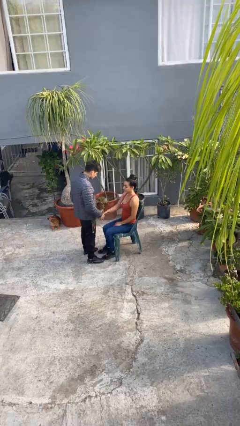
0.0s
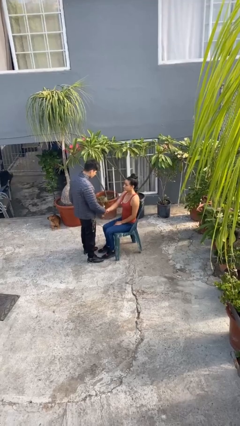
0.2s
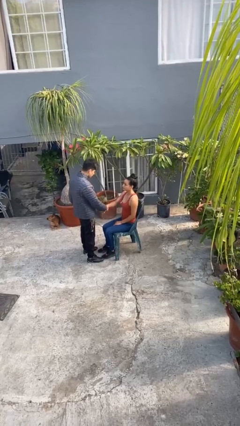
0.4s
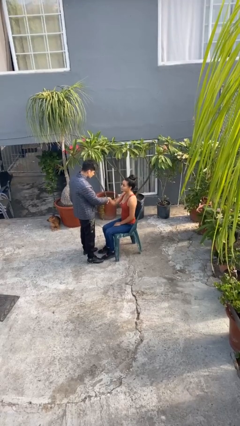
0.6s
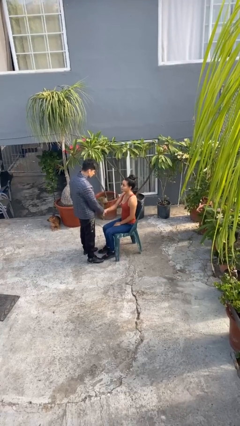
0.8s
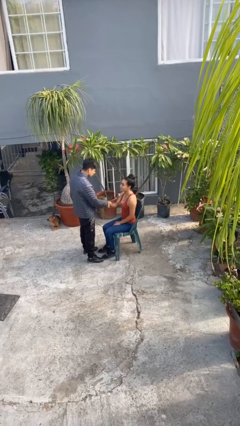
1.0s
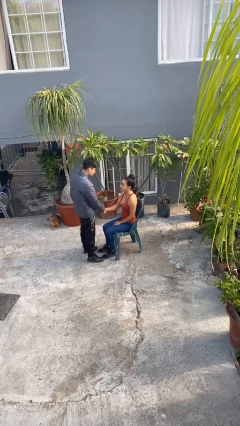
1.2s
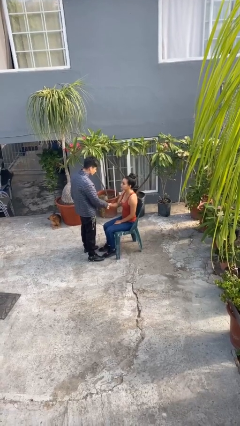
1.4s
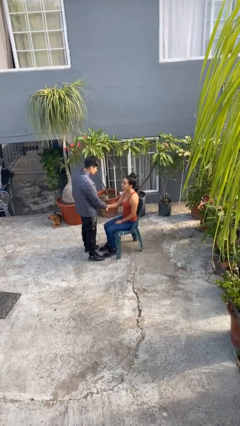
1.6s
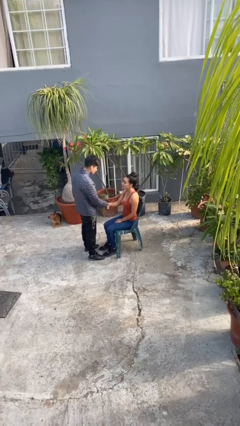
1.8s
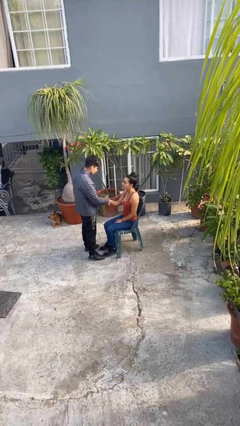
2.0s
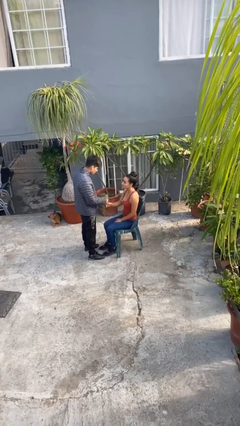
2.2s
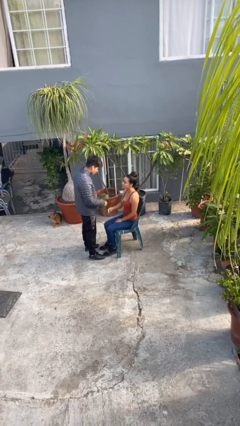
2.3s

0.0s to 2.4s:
person shakes hand

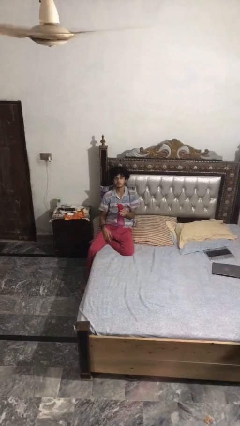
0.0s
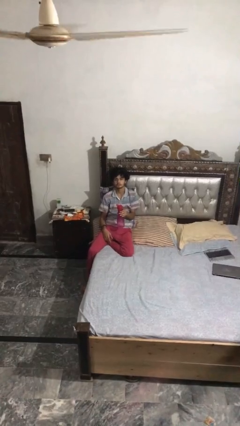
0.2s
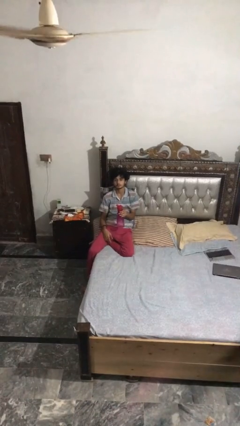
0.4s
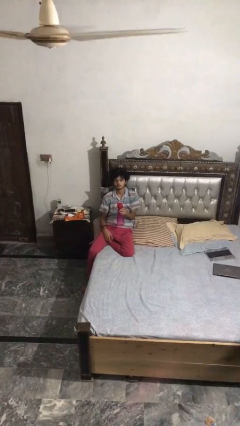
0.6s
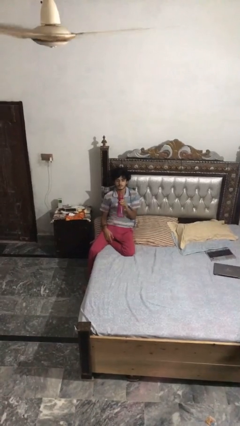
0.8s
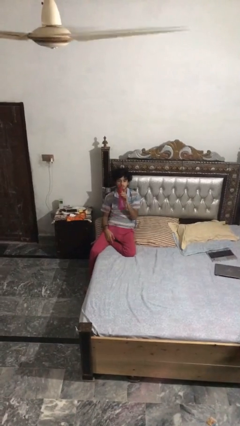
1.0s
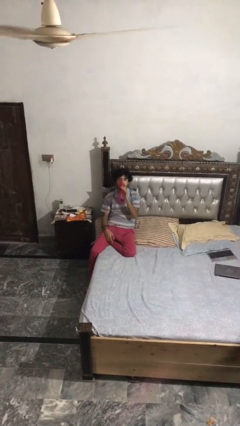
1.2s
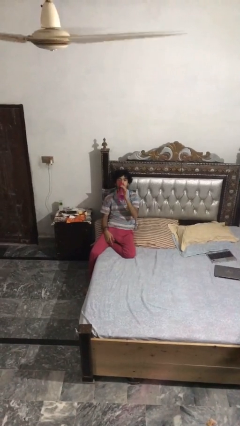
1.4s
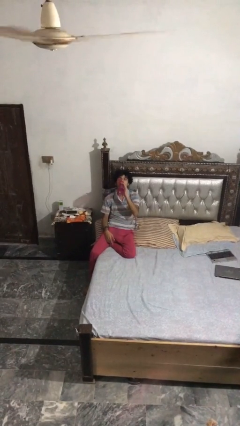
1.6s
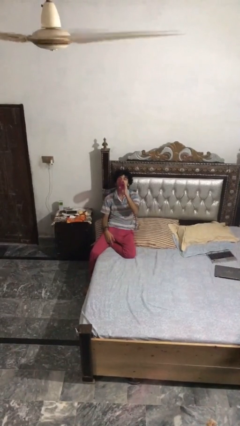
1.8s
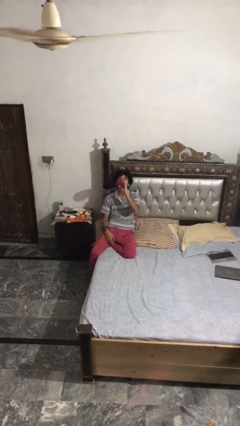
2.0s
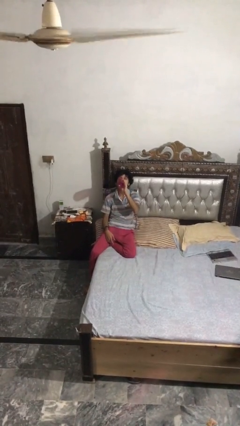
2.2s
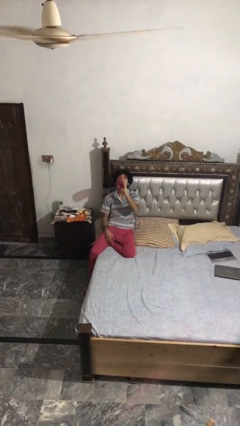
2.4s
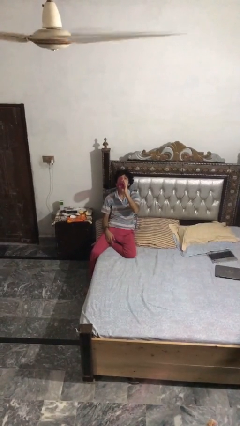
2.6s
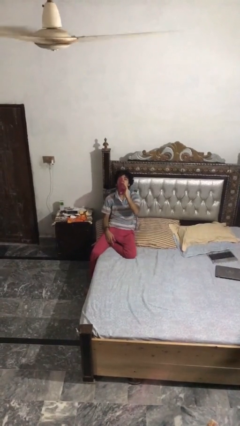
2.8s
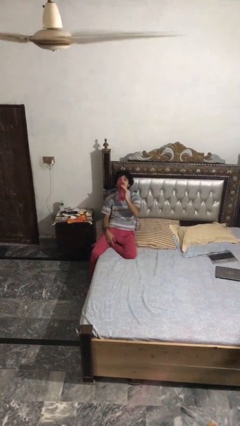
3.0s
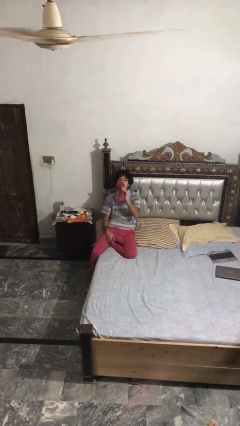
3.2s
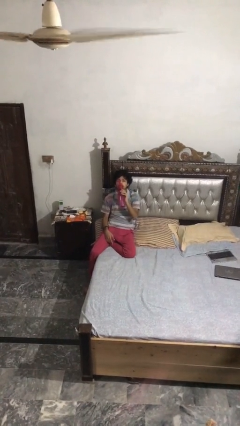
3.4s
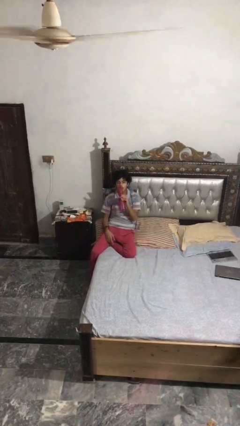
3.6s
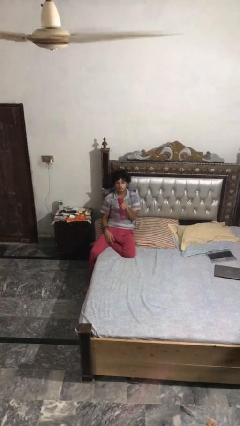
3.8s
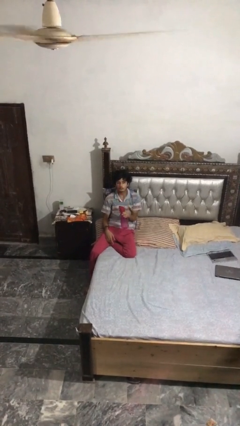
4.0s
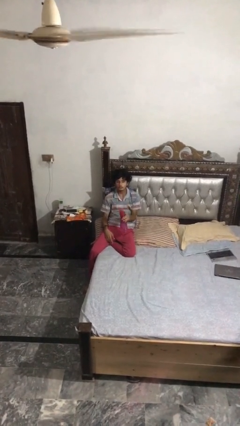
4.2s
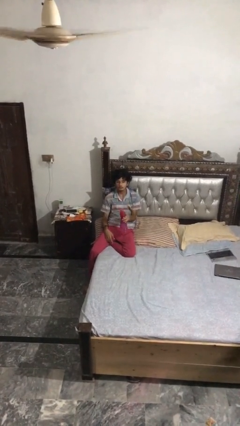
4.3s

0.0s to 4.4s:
person drinks from bottle

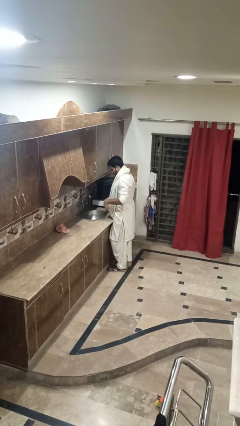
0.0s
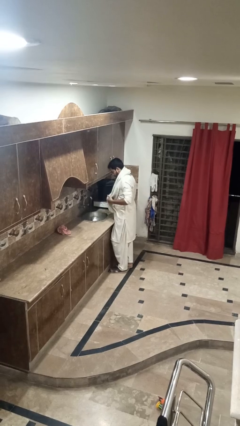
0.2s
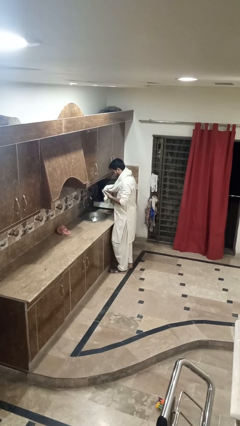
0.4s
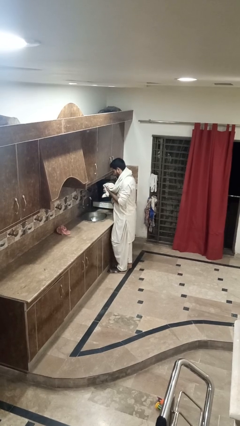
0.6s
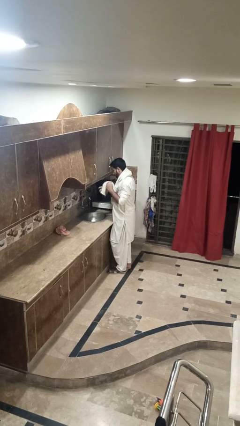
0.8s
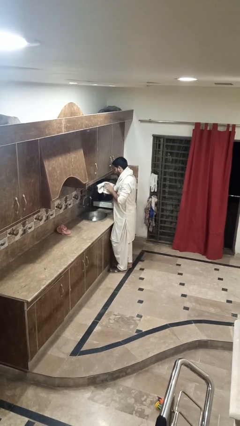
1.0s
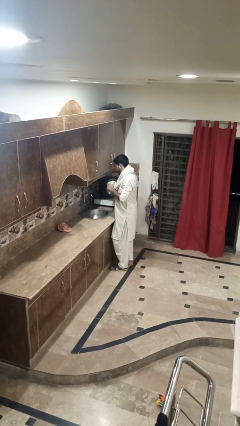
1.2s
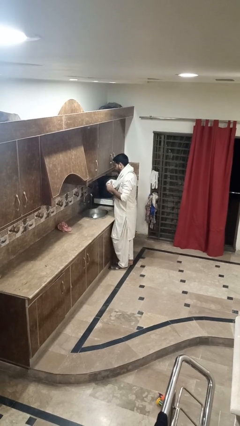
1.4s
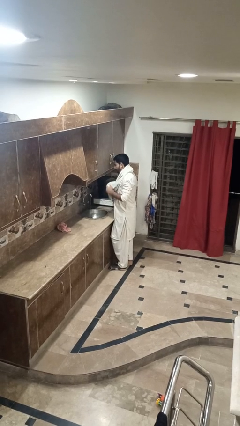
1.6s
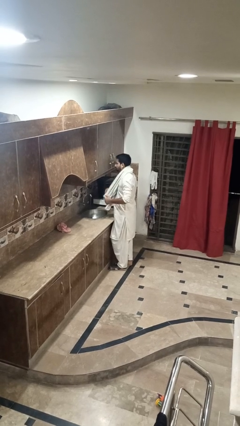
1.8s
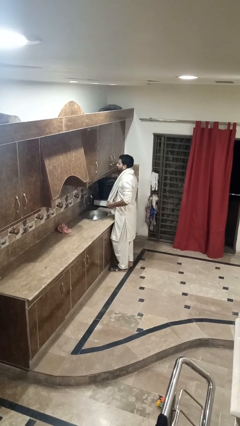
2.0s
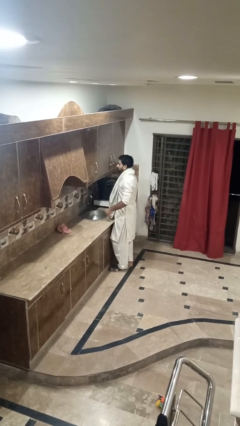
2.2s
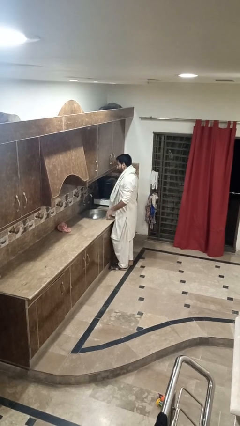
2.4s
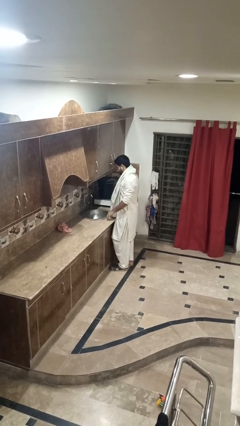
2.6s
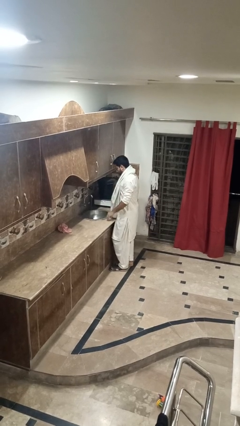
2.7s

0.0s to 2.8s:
person dries hands with towel

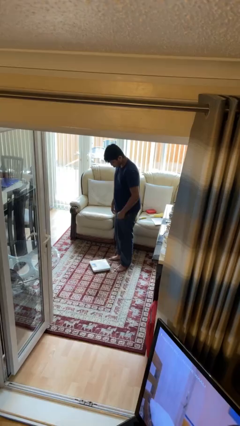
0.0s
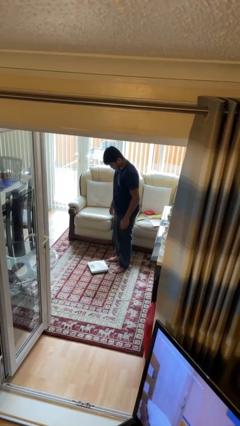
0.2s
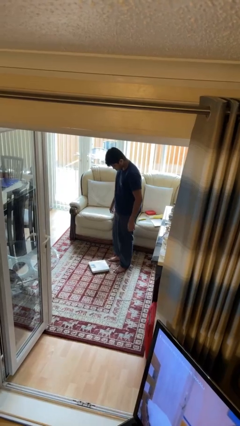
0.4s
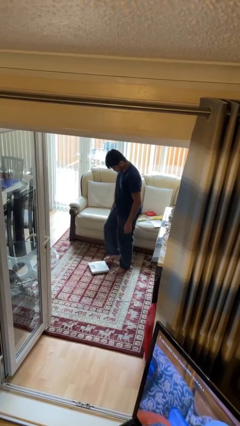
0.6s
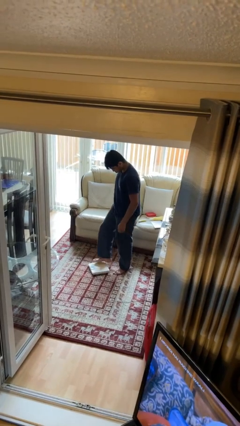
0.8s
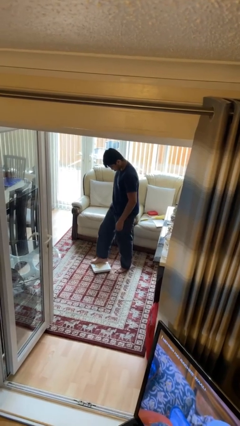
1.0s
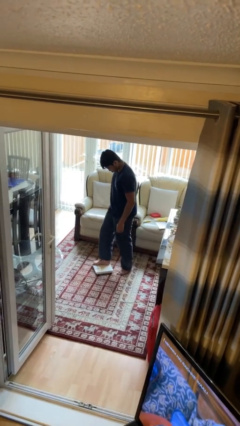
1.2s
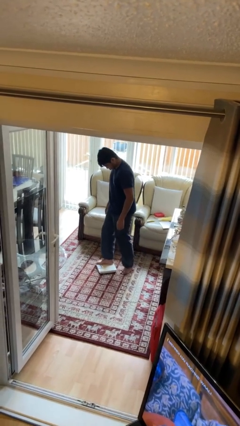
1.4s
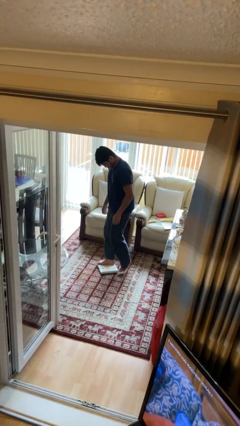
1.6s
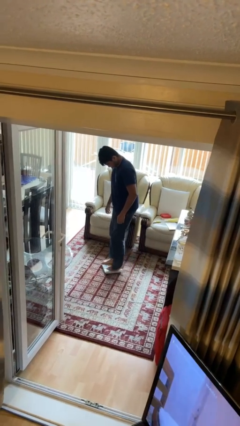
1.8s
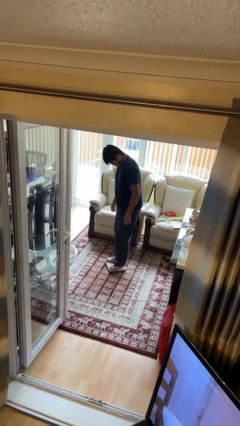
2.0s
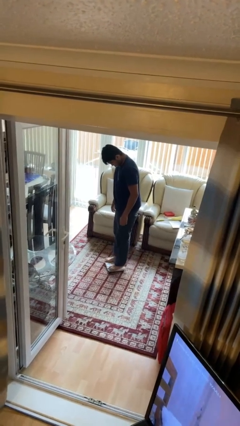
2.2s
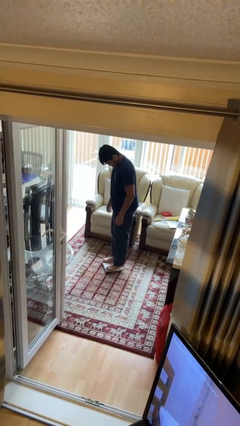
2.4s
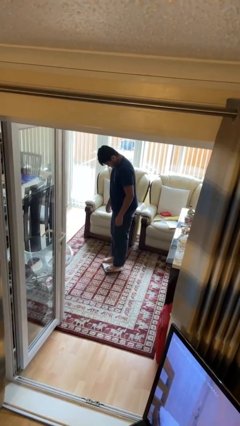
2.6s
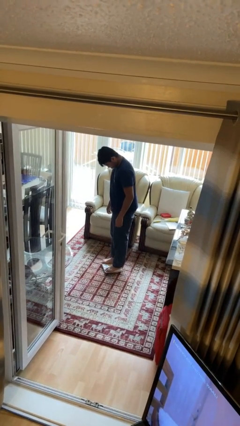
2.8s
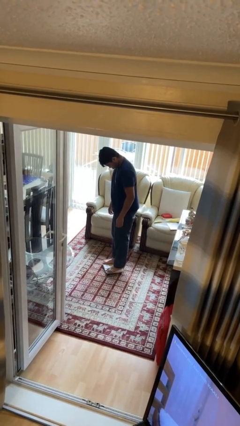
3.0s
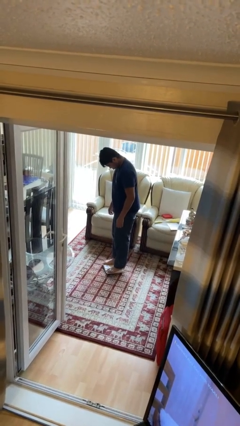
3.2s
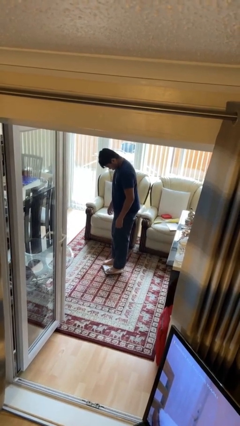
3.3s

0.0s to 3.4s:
person uses bodyweight scale

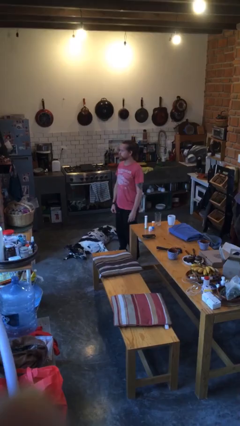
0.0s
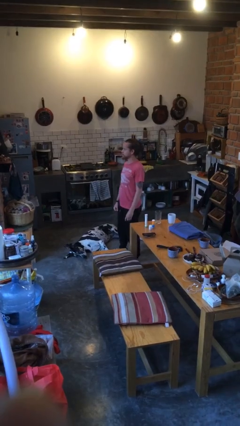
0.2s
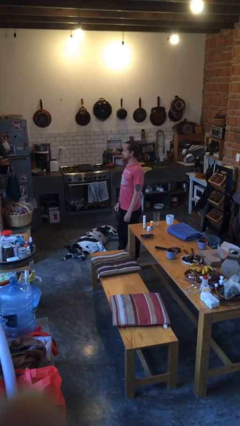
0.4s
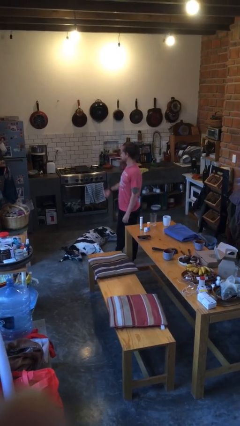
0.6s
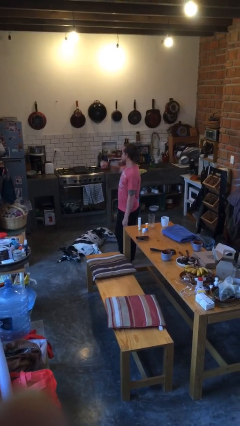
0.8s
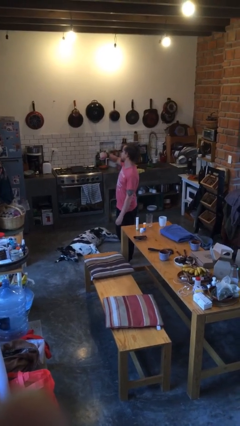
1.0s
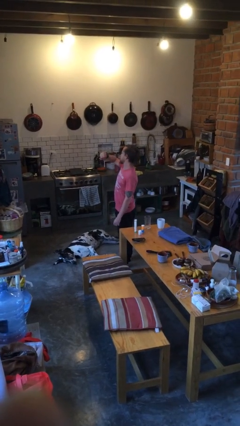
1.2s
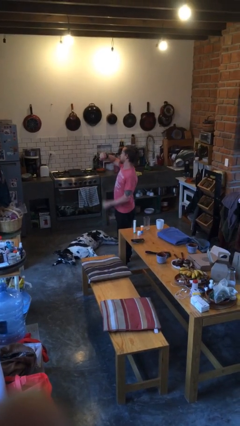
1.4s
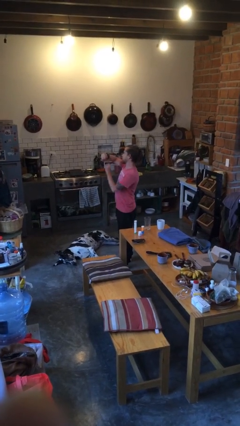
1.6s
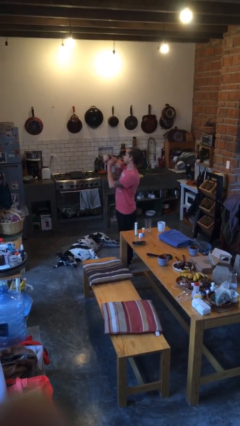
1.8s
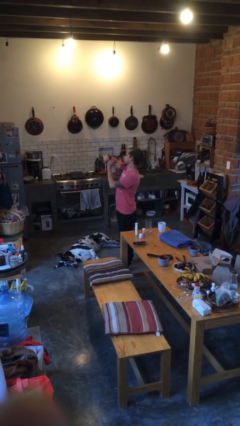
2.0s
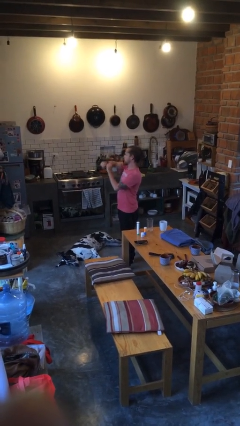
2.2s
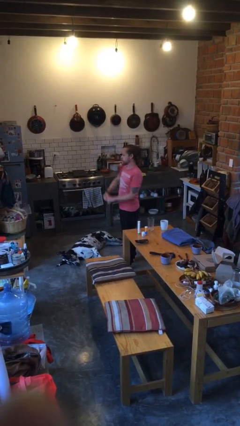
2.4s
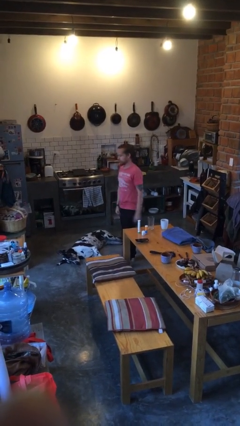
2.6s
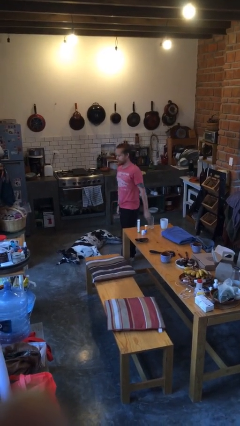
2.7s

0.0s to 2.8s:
person looks at wristwatch

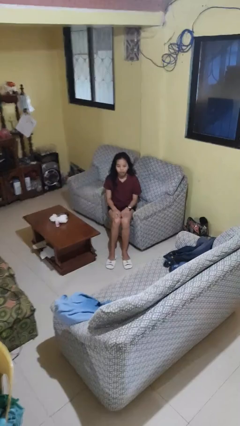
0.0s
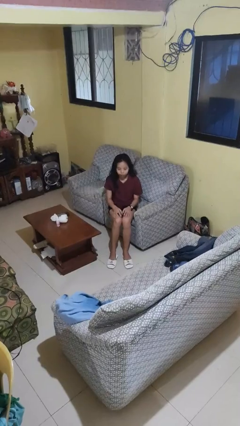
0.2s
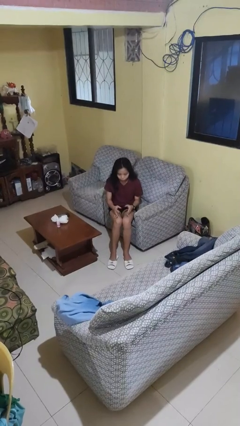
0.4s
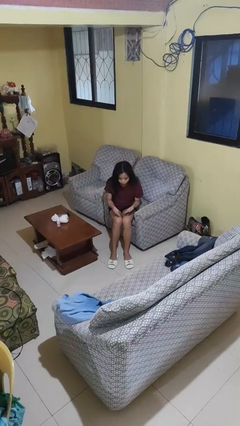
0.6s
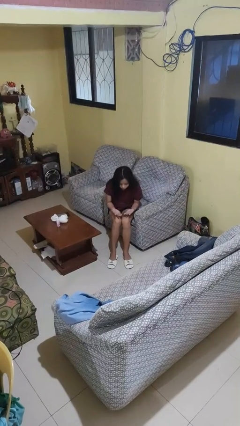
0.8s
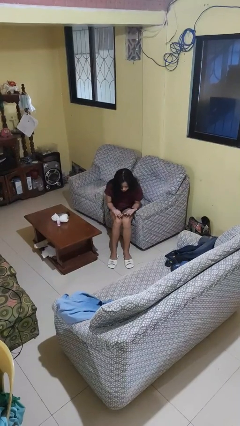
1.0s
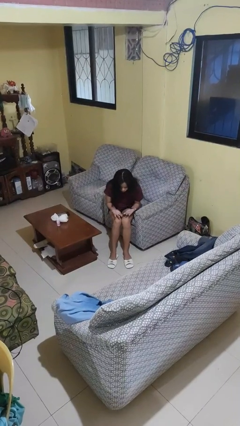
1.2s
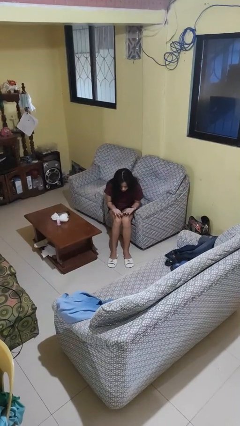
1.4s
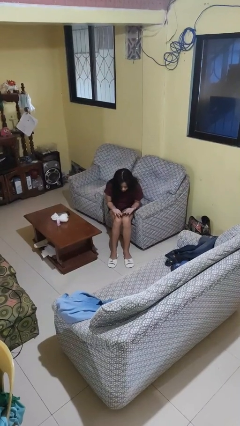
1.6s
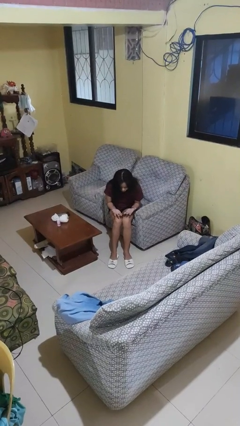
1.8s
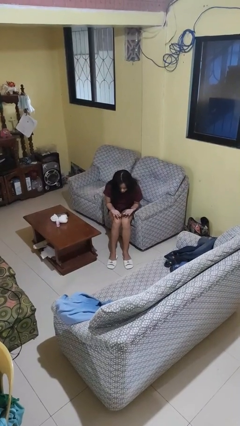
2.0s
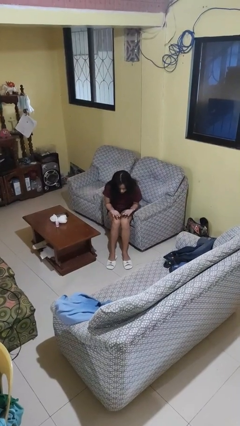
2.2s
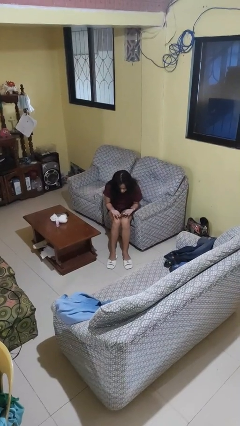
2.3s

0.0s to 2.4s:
person looks at hands in lap
